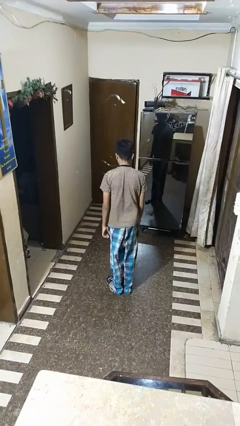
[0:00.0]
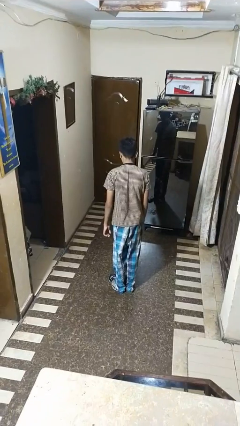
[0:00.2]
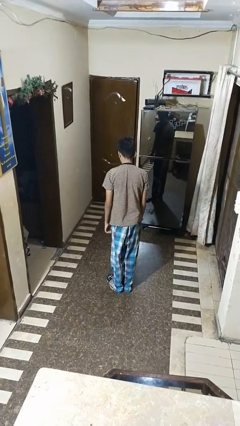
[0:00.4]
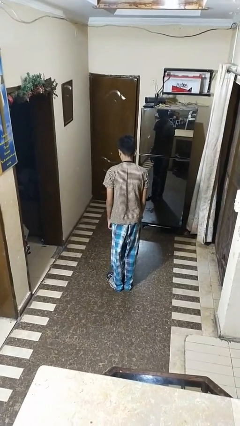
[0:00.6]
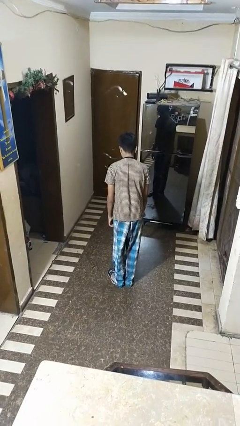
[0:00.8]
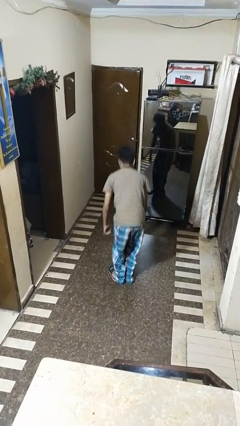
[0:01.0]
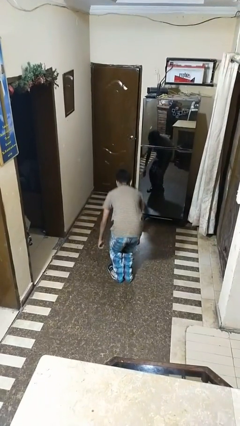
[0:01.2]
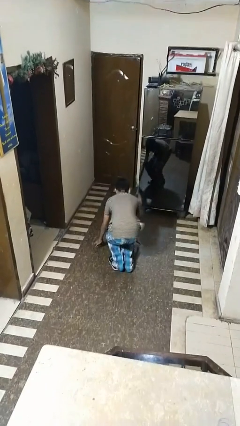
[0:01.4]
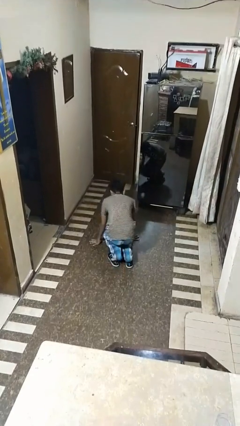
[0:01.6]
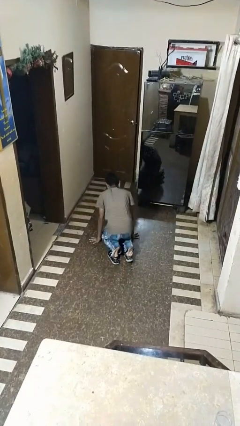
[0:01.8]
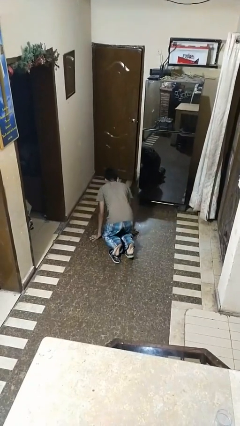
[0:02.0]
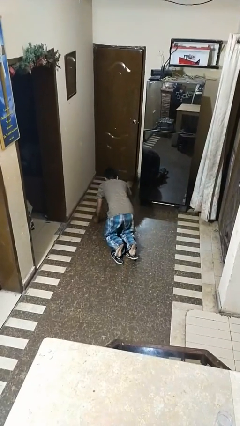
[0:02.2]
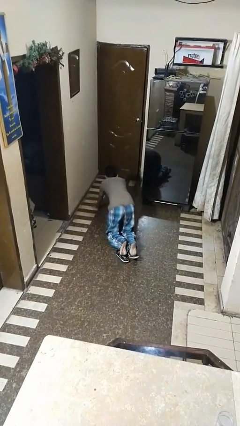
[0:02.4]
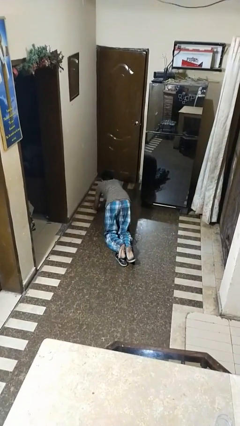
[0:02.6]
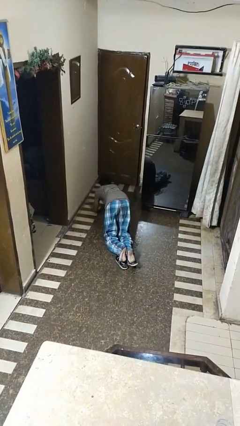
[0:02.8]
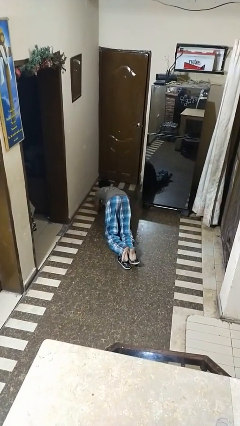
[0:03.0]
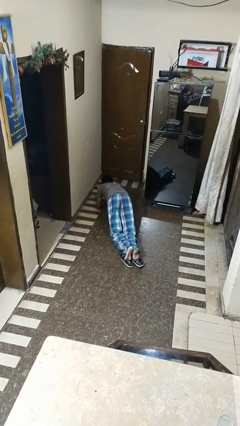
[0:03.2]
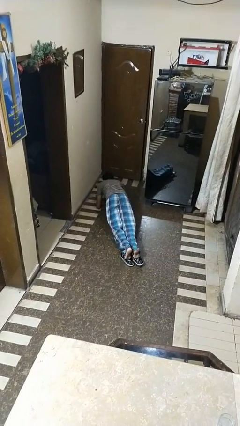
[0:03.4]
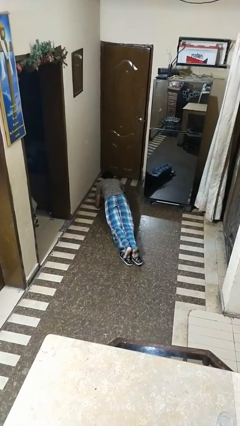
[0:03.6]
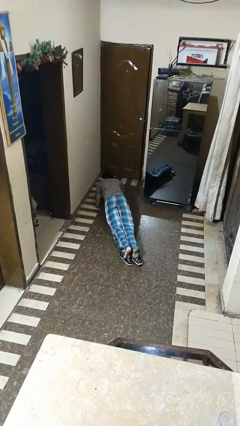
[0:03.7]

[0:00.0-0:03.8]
person exercises with plank

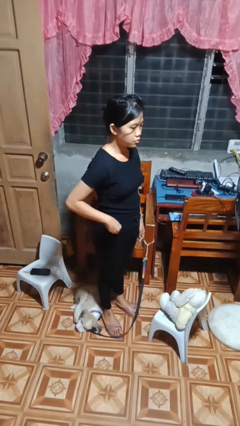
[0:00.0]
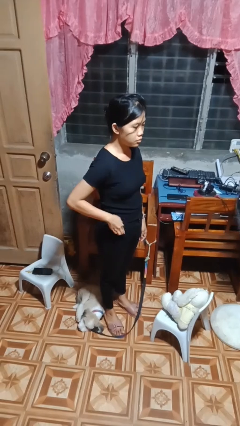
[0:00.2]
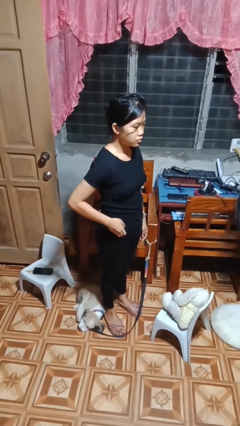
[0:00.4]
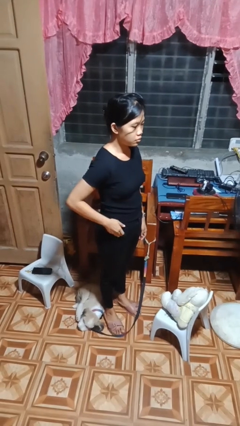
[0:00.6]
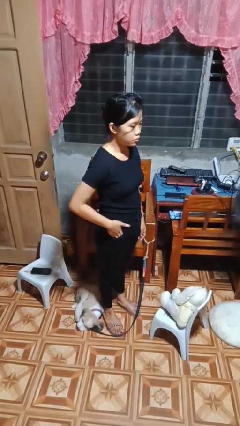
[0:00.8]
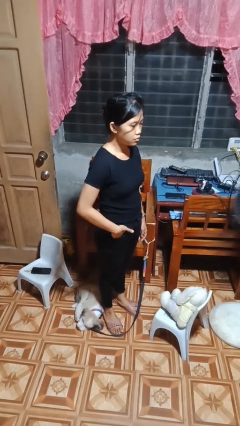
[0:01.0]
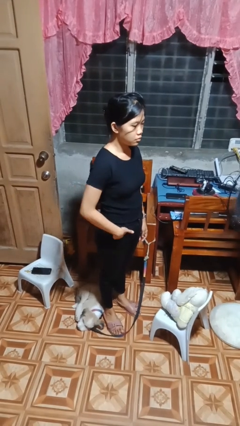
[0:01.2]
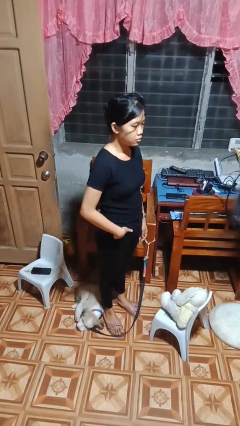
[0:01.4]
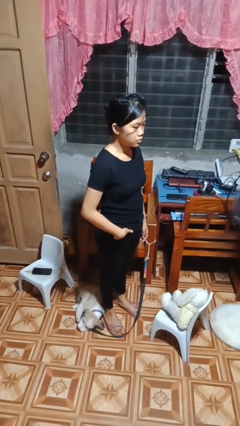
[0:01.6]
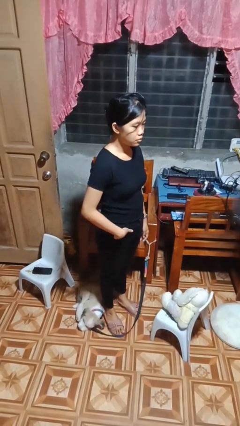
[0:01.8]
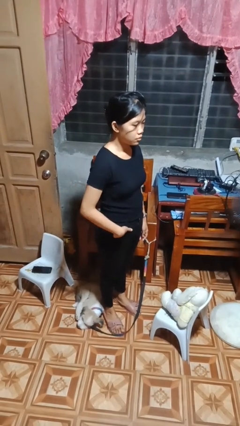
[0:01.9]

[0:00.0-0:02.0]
person puts hands in back pockets

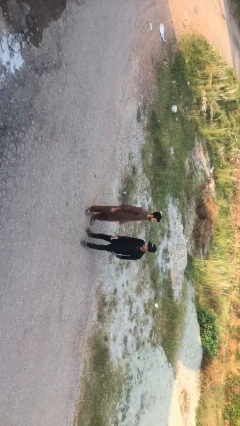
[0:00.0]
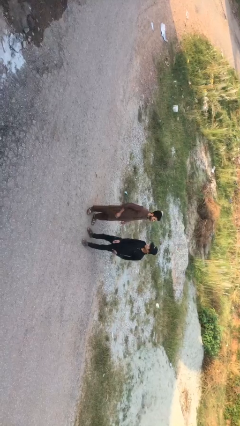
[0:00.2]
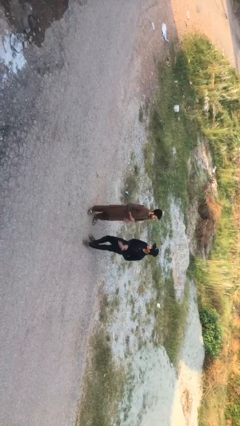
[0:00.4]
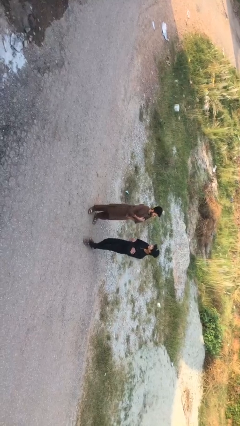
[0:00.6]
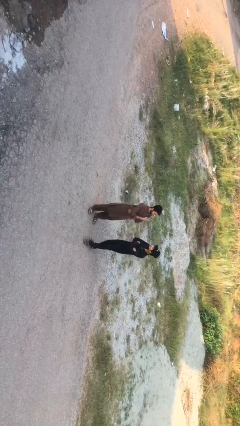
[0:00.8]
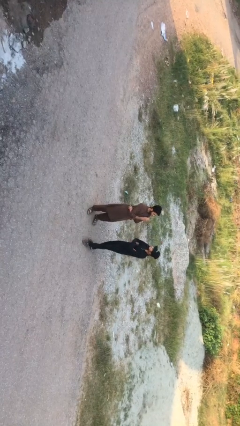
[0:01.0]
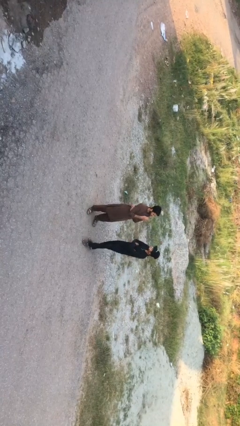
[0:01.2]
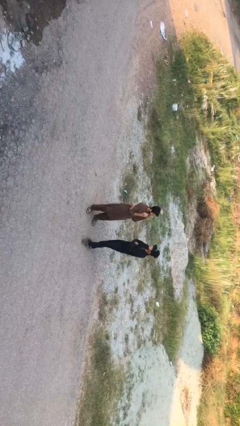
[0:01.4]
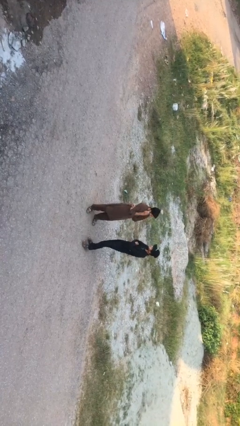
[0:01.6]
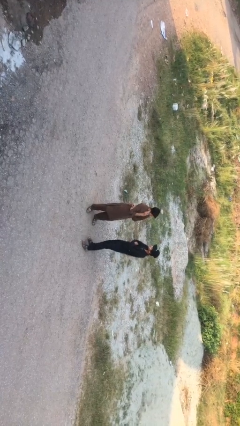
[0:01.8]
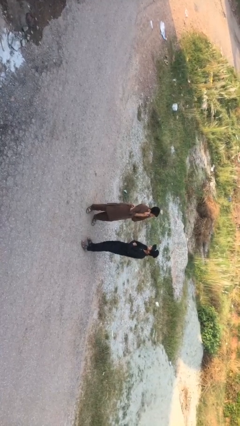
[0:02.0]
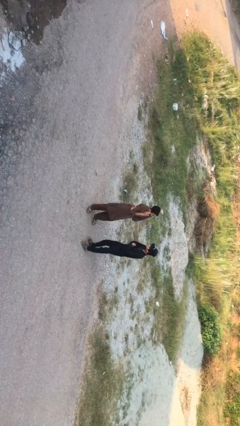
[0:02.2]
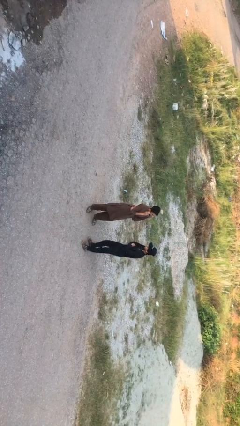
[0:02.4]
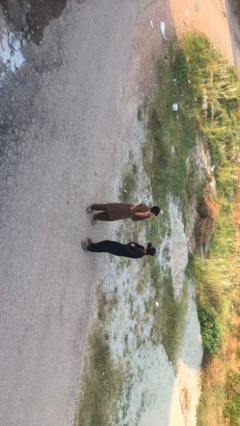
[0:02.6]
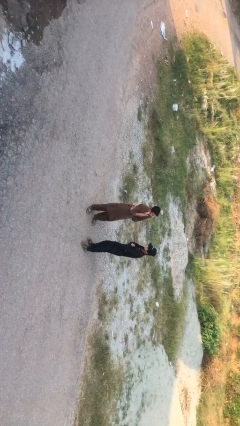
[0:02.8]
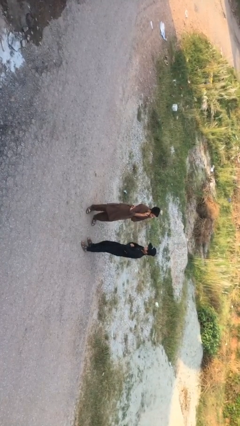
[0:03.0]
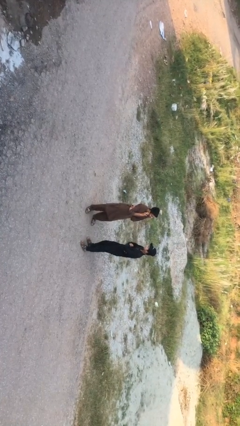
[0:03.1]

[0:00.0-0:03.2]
person talks to person

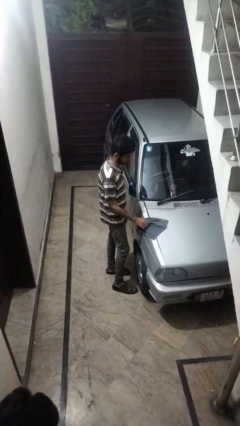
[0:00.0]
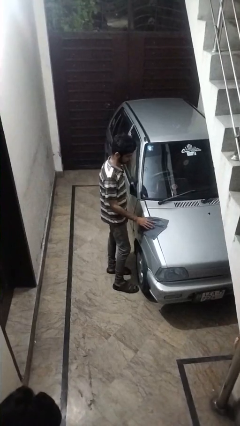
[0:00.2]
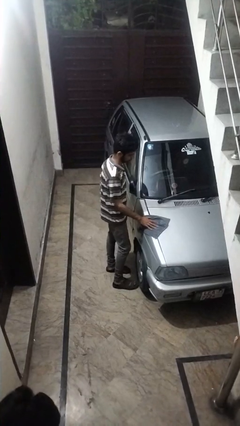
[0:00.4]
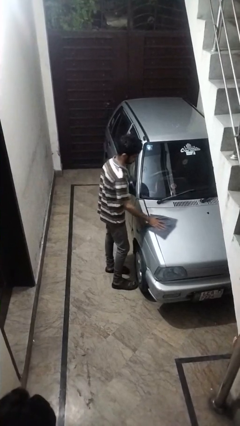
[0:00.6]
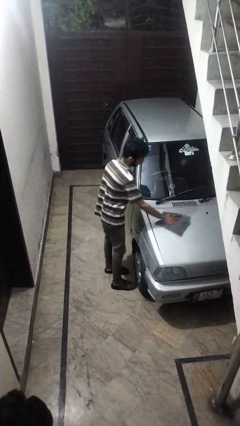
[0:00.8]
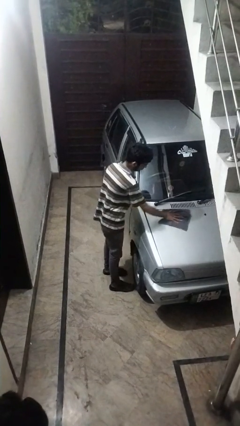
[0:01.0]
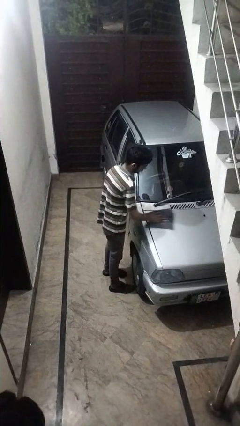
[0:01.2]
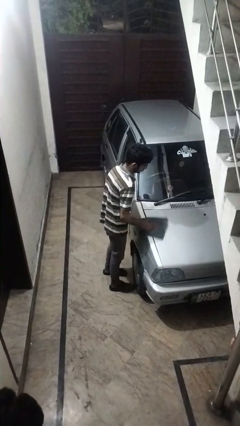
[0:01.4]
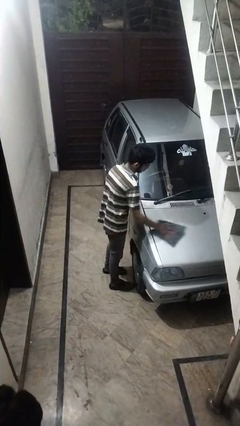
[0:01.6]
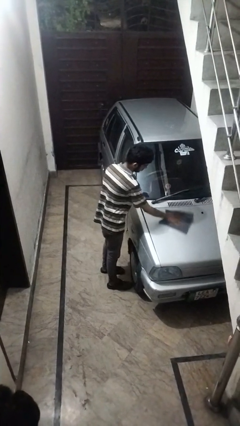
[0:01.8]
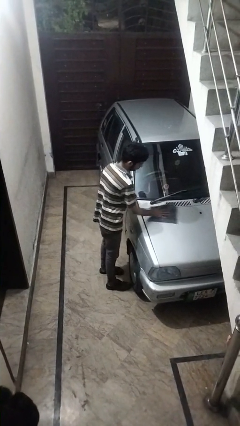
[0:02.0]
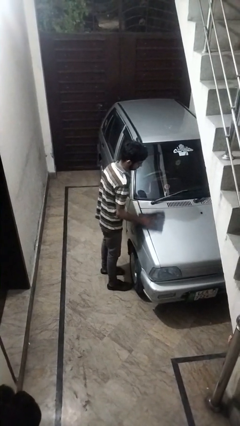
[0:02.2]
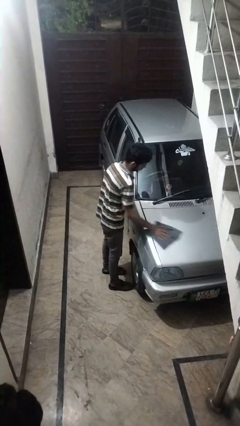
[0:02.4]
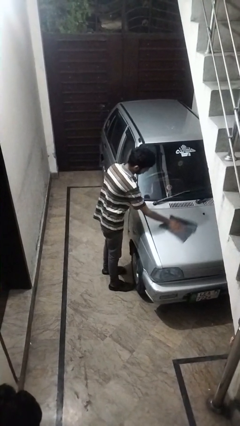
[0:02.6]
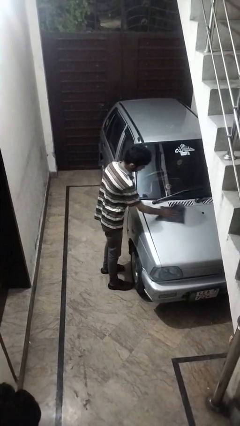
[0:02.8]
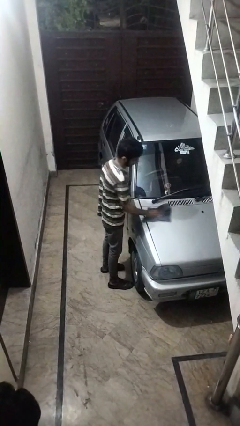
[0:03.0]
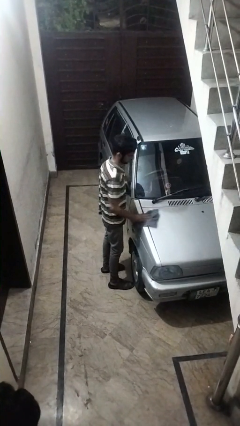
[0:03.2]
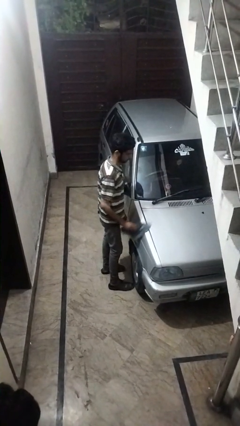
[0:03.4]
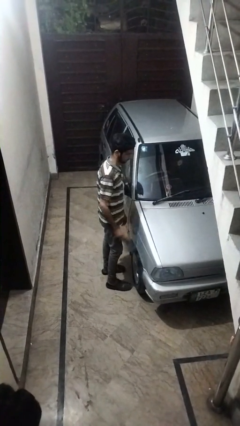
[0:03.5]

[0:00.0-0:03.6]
person polishes car with rag

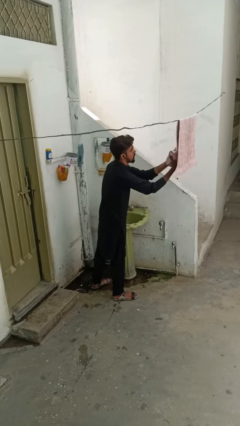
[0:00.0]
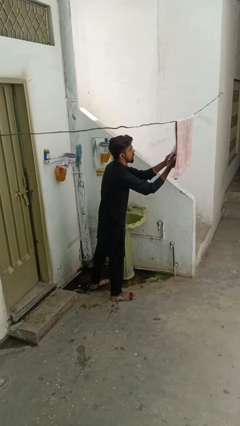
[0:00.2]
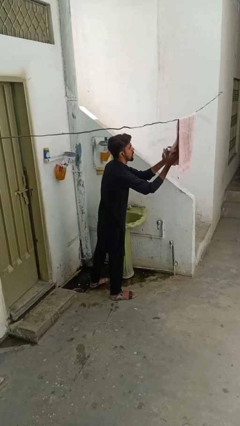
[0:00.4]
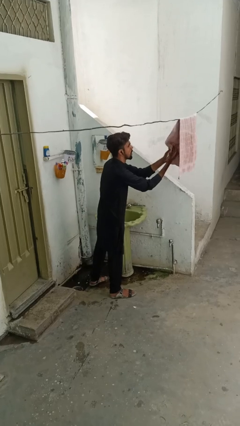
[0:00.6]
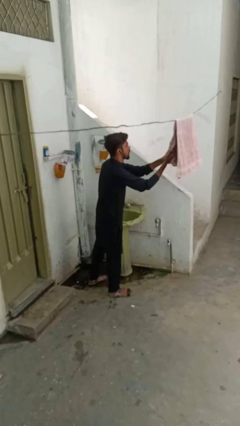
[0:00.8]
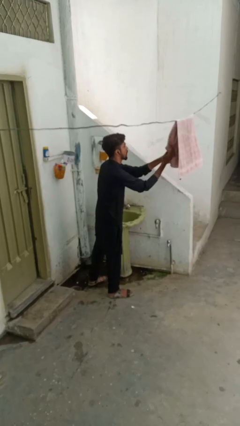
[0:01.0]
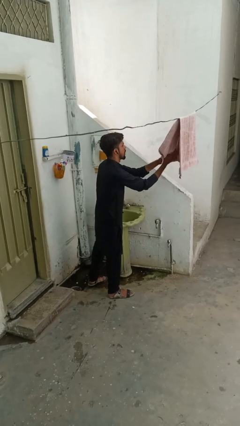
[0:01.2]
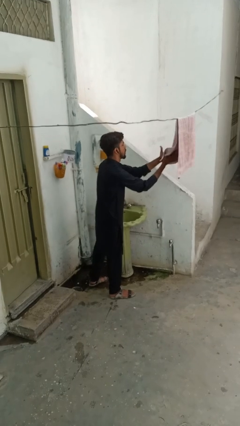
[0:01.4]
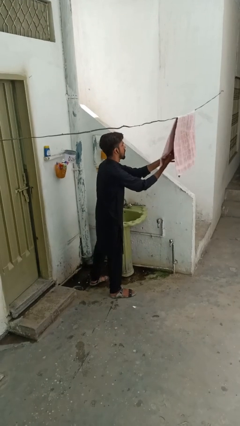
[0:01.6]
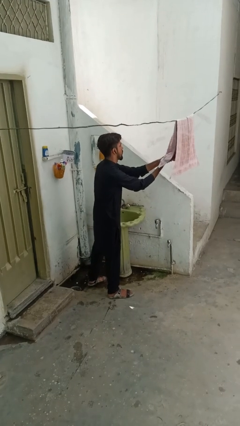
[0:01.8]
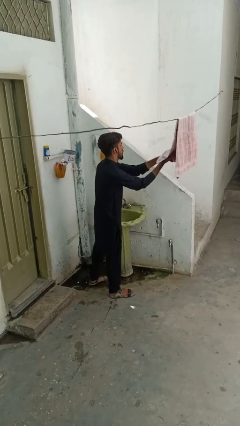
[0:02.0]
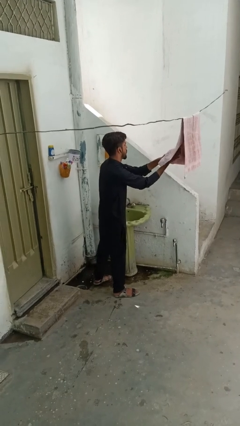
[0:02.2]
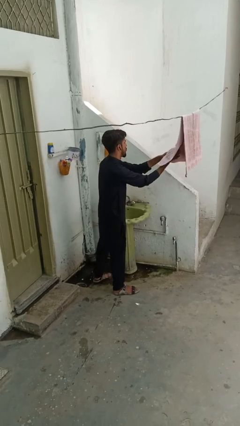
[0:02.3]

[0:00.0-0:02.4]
person dries hands with towel

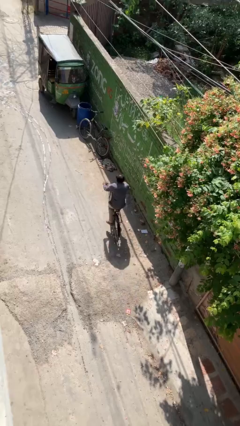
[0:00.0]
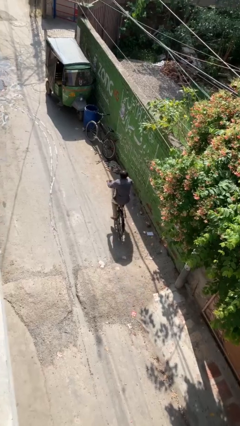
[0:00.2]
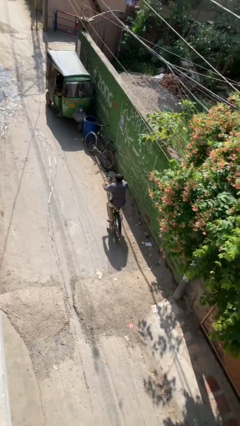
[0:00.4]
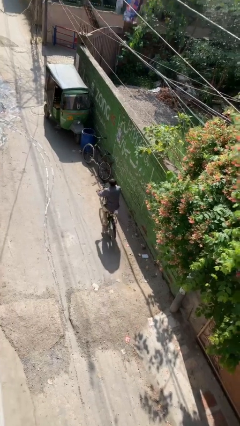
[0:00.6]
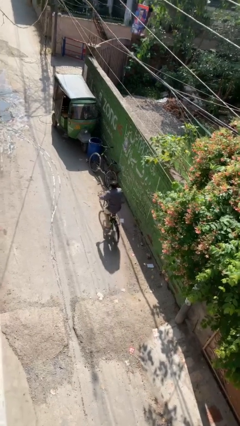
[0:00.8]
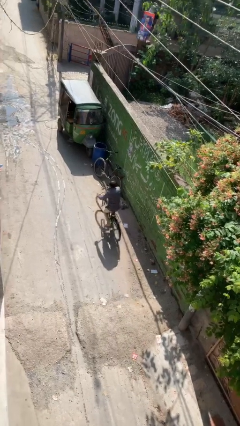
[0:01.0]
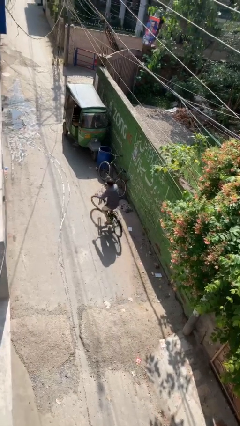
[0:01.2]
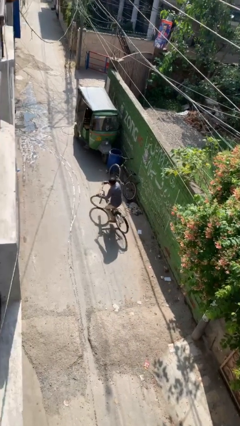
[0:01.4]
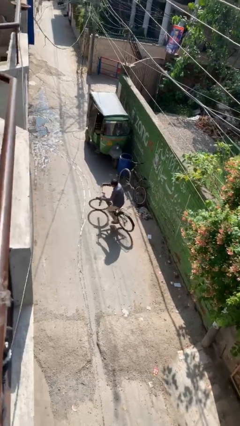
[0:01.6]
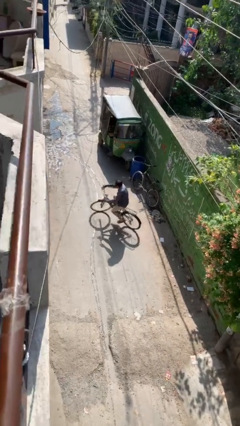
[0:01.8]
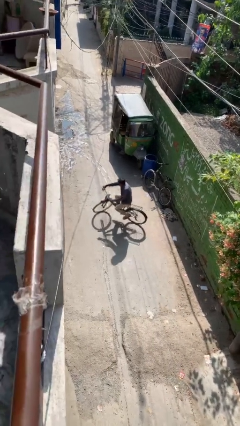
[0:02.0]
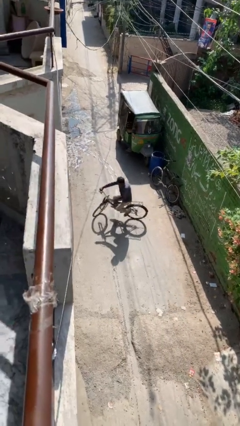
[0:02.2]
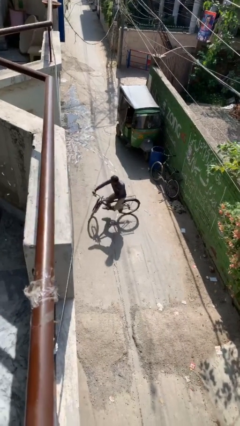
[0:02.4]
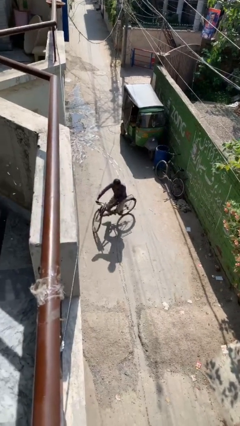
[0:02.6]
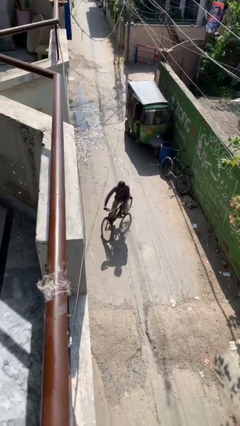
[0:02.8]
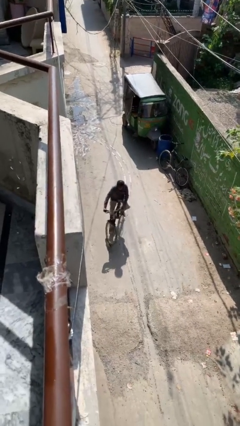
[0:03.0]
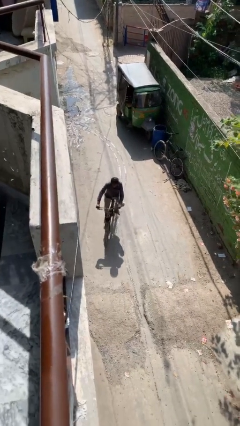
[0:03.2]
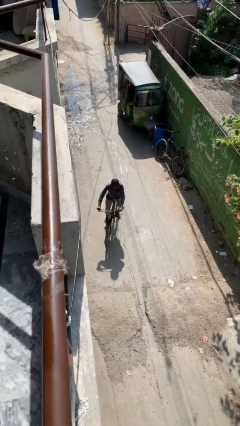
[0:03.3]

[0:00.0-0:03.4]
person rides bicycle
